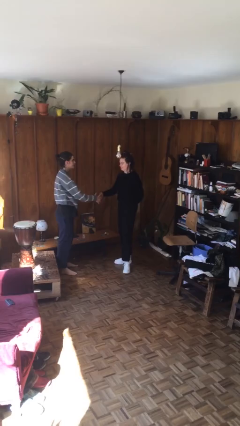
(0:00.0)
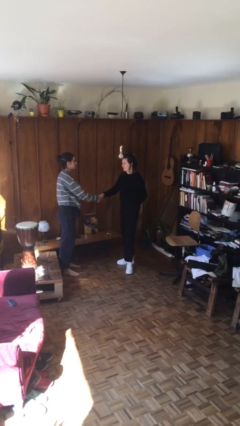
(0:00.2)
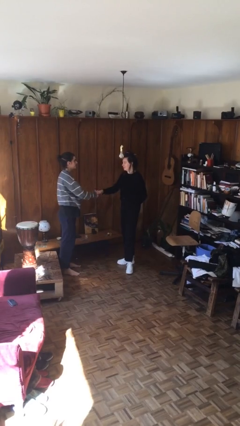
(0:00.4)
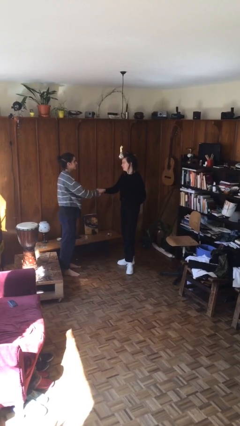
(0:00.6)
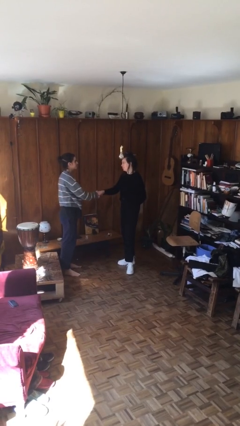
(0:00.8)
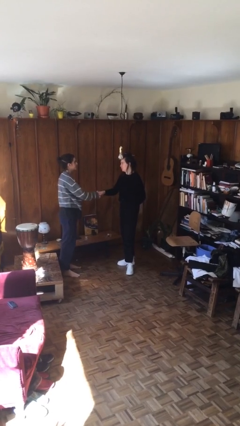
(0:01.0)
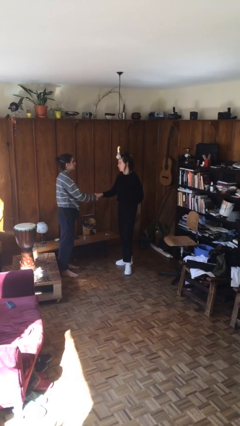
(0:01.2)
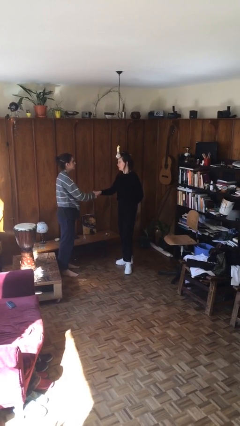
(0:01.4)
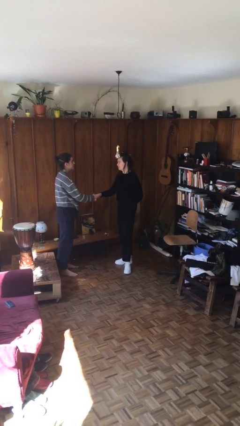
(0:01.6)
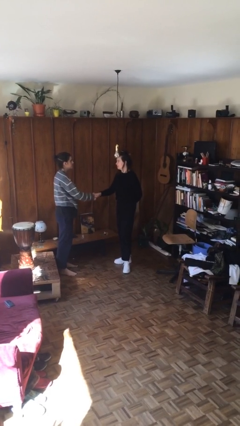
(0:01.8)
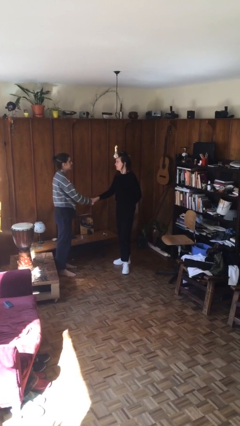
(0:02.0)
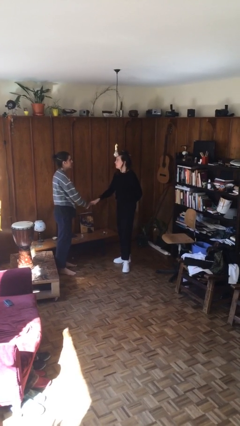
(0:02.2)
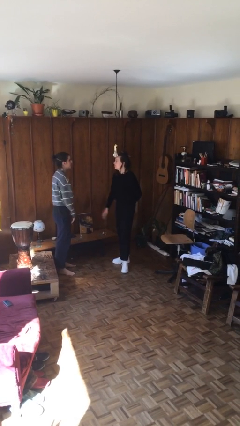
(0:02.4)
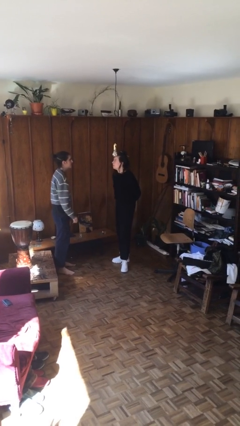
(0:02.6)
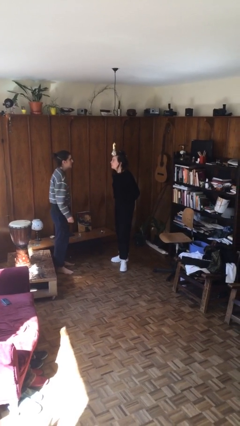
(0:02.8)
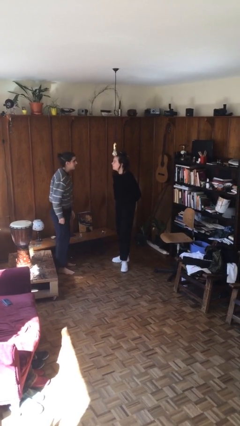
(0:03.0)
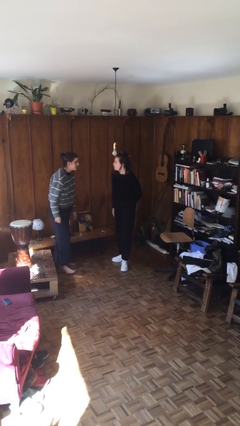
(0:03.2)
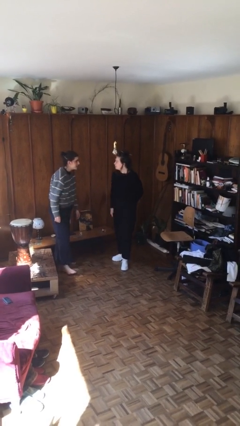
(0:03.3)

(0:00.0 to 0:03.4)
person shakes hand

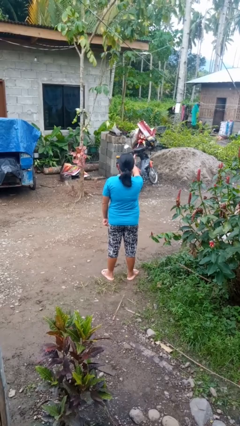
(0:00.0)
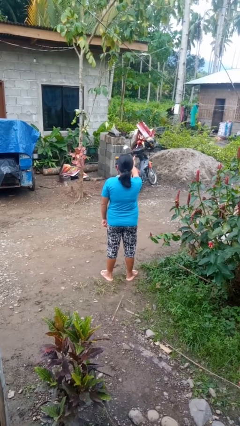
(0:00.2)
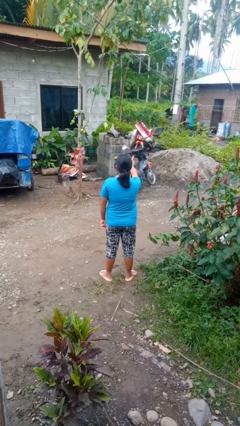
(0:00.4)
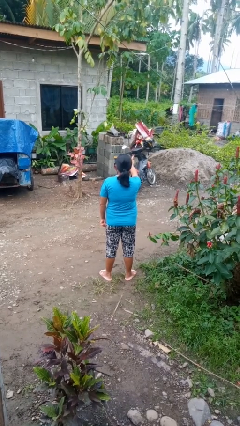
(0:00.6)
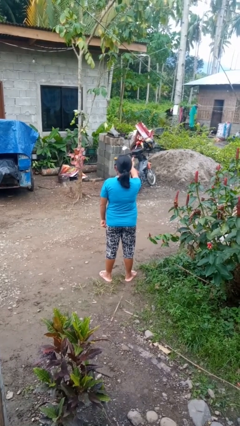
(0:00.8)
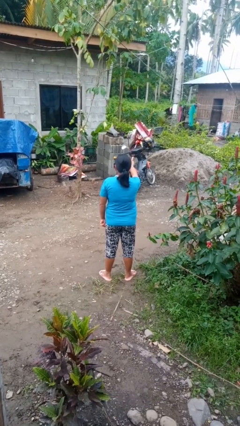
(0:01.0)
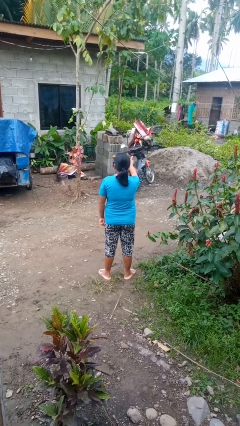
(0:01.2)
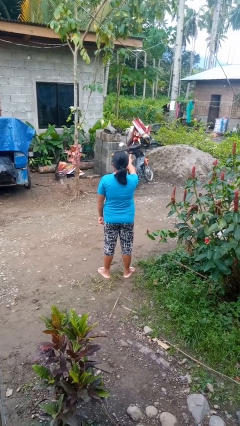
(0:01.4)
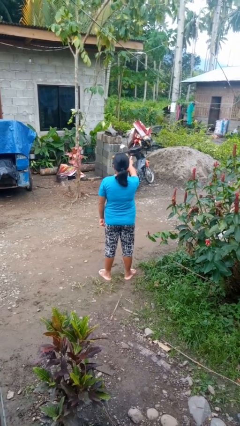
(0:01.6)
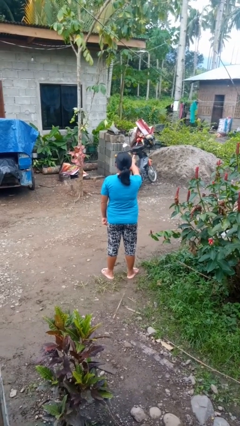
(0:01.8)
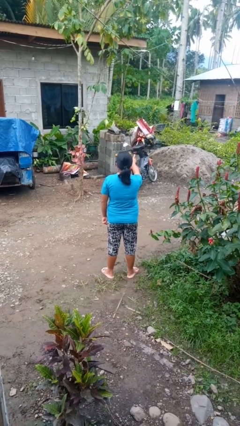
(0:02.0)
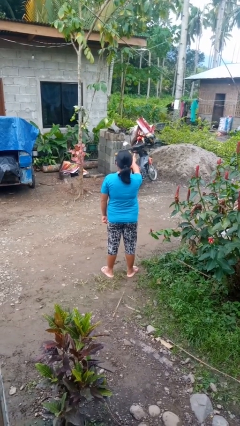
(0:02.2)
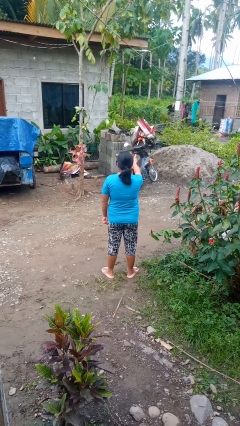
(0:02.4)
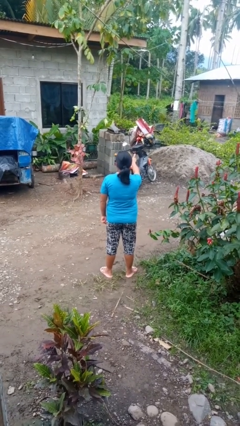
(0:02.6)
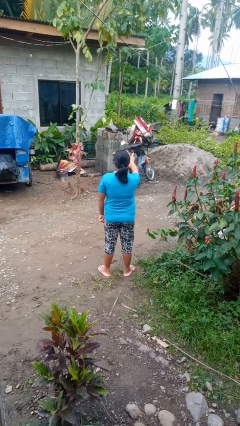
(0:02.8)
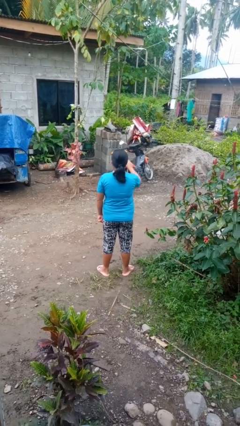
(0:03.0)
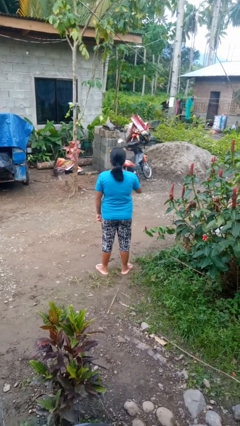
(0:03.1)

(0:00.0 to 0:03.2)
person gestures peace

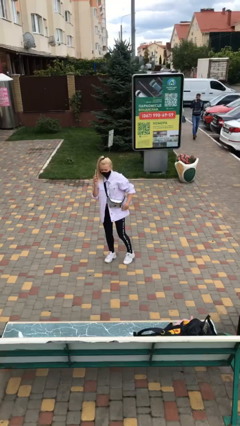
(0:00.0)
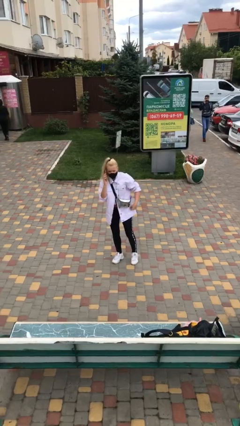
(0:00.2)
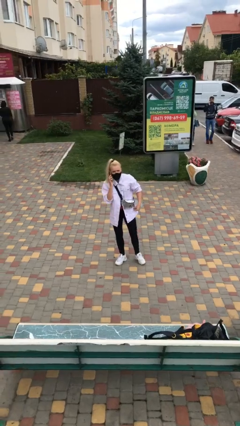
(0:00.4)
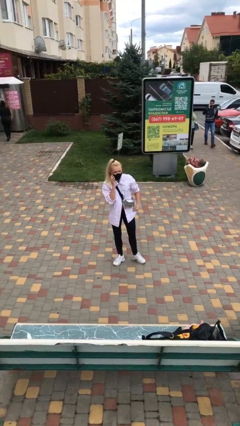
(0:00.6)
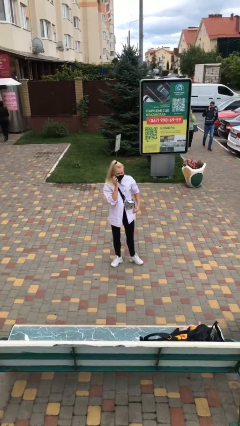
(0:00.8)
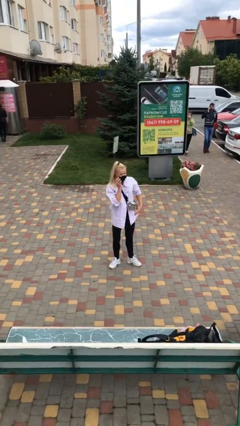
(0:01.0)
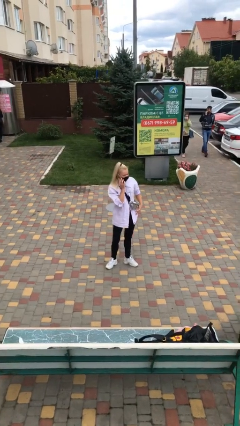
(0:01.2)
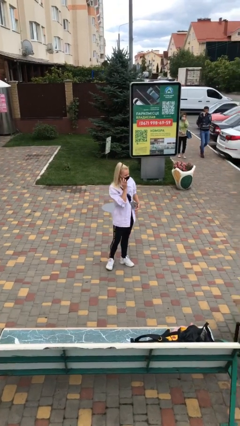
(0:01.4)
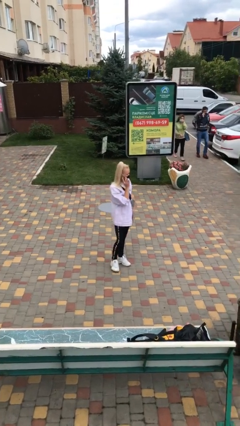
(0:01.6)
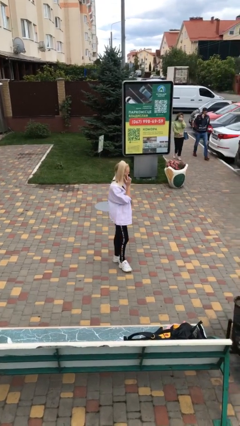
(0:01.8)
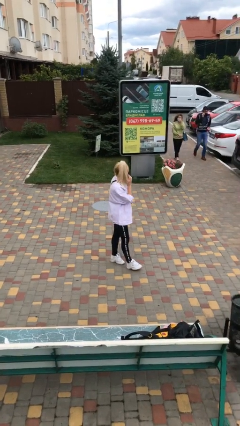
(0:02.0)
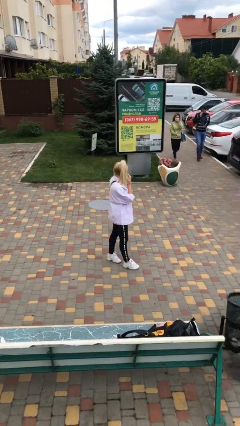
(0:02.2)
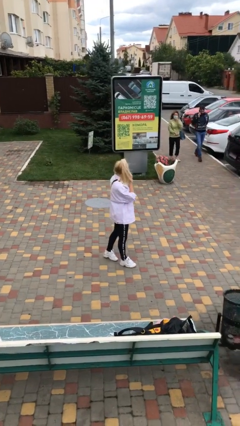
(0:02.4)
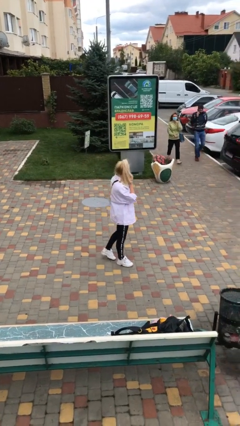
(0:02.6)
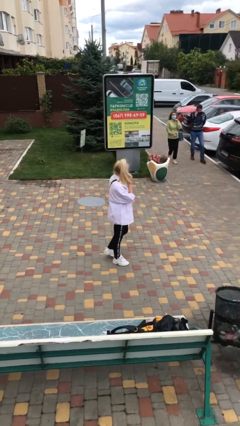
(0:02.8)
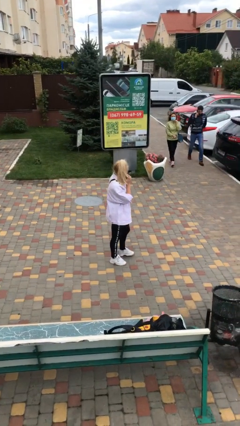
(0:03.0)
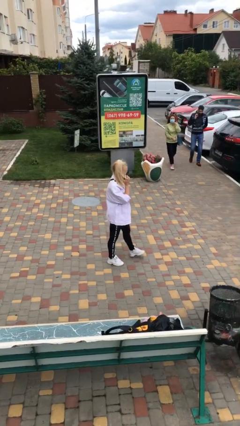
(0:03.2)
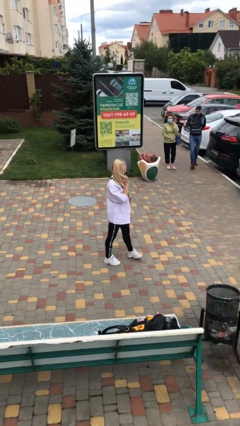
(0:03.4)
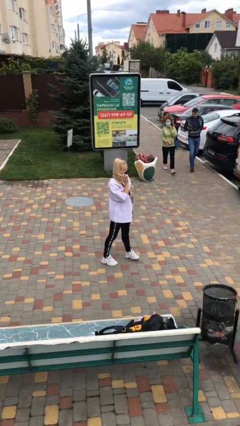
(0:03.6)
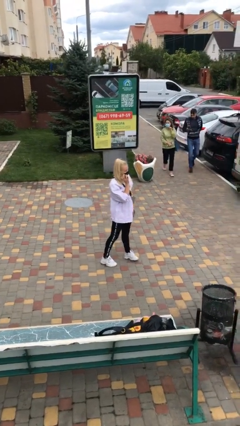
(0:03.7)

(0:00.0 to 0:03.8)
person talks on phone

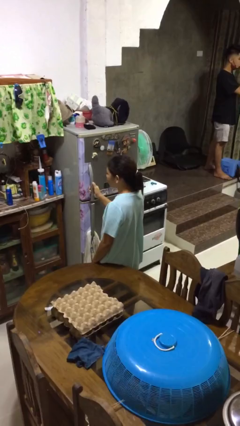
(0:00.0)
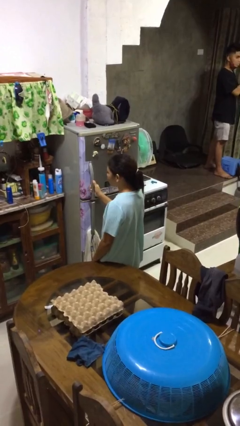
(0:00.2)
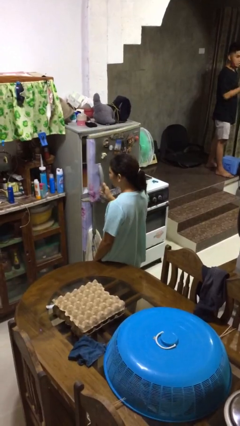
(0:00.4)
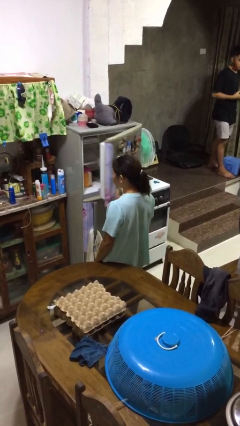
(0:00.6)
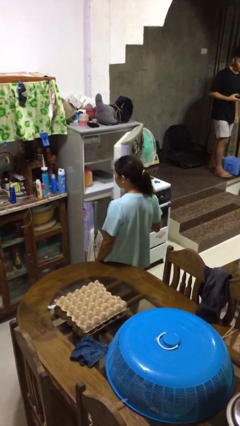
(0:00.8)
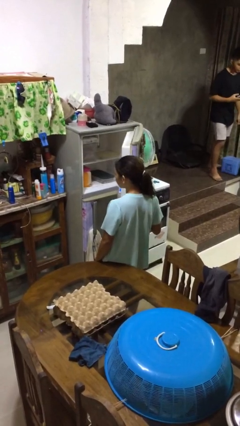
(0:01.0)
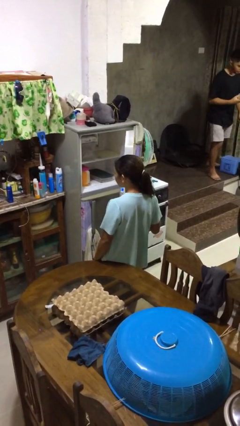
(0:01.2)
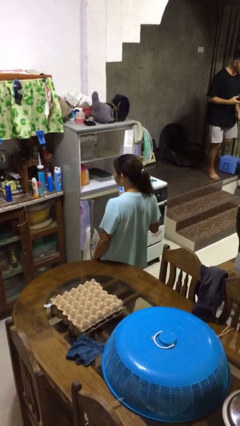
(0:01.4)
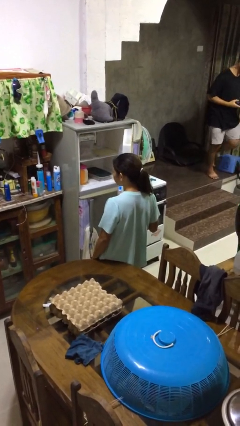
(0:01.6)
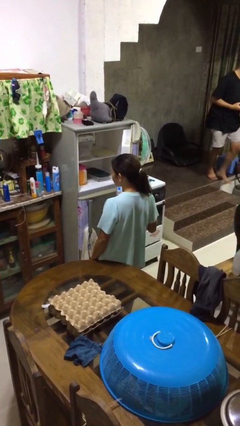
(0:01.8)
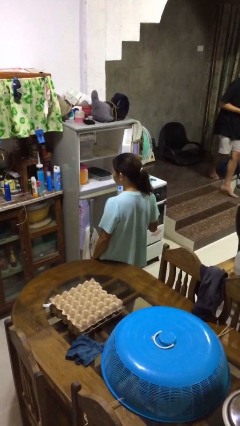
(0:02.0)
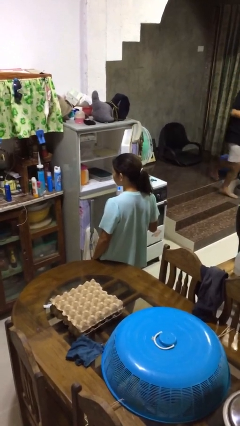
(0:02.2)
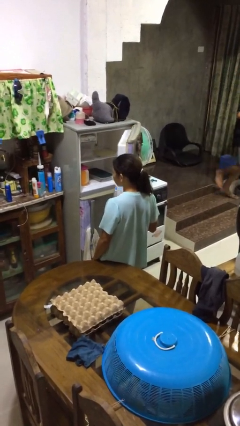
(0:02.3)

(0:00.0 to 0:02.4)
person opens refrigerator

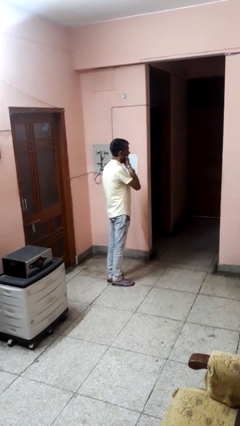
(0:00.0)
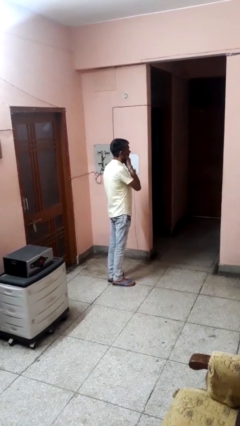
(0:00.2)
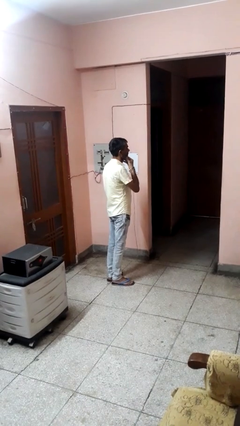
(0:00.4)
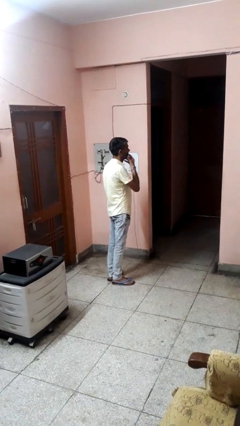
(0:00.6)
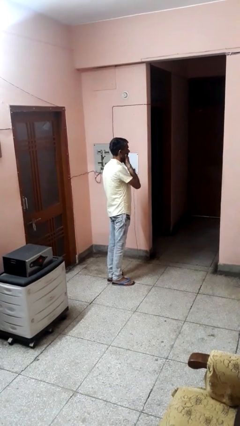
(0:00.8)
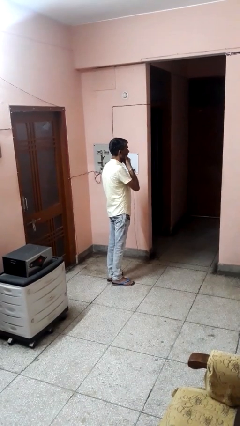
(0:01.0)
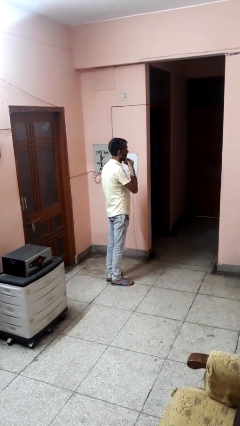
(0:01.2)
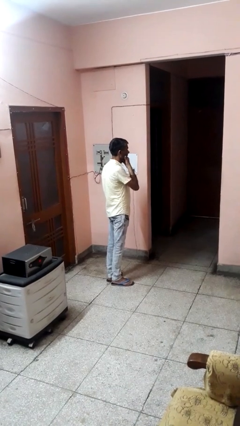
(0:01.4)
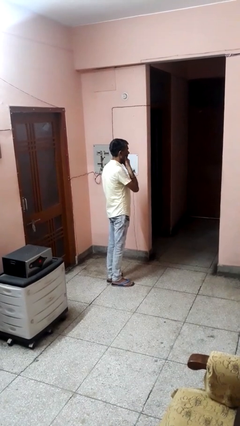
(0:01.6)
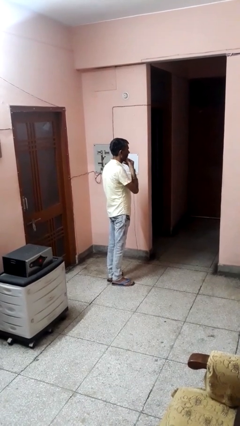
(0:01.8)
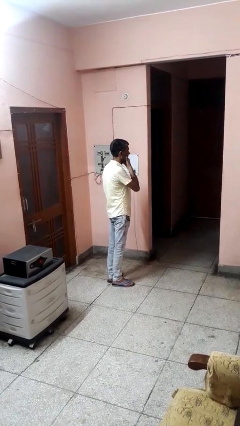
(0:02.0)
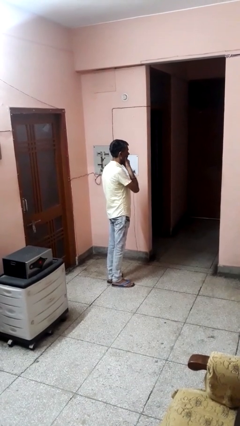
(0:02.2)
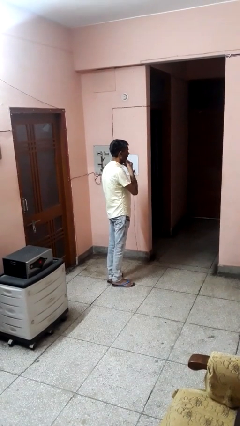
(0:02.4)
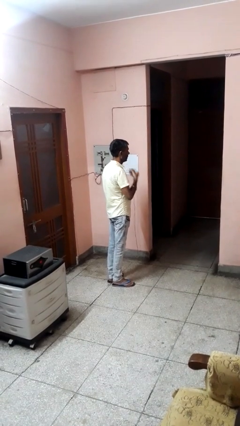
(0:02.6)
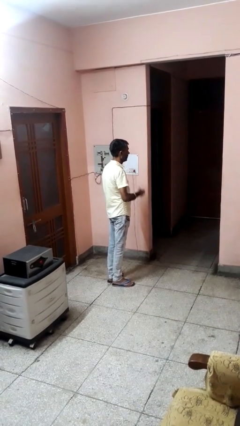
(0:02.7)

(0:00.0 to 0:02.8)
person strokes chin

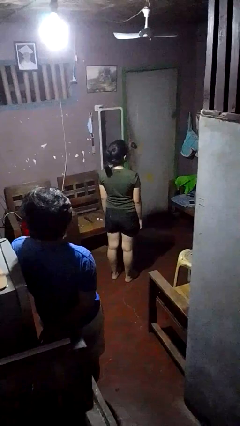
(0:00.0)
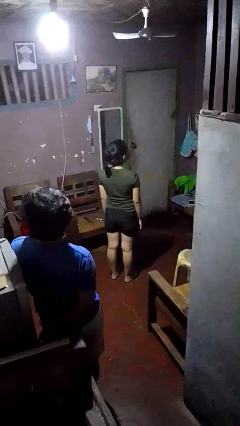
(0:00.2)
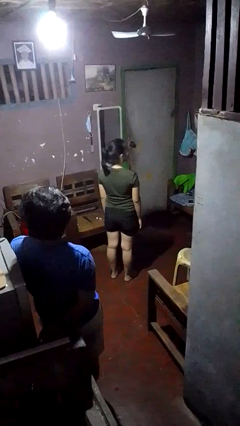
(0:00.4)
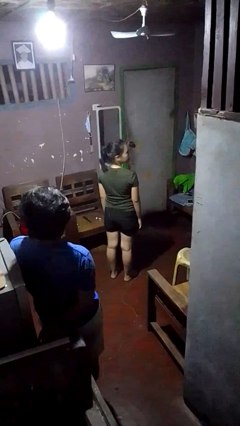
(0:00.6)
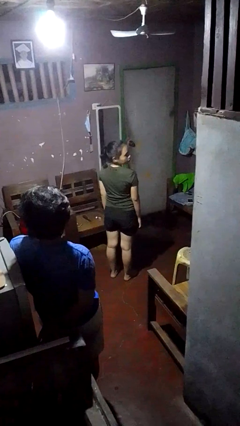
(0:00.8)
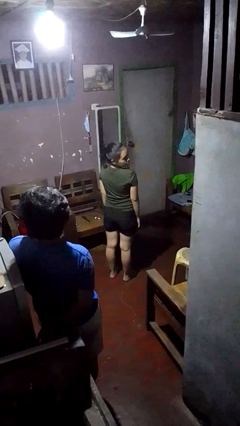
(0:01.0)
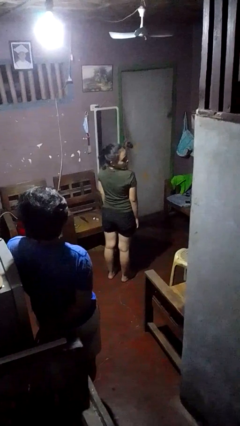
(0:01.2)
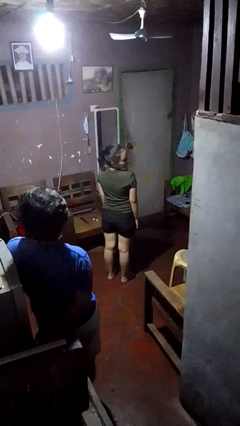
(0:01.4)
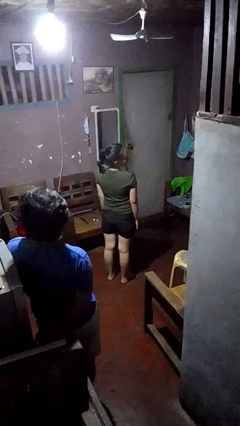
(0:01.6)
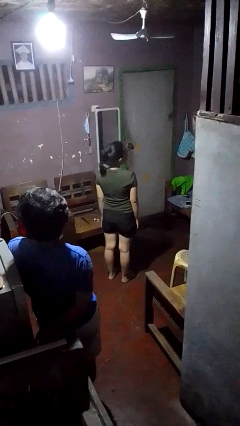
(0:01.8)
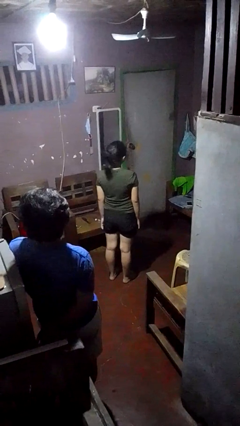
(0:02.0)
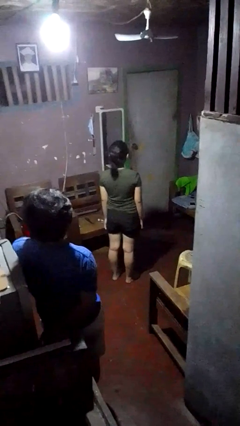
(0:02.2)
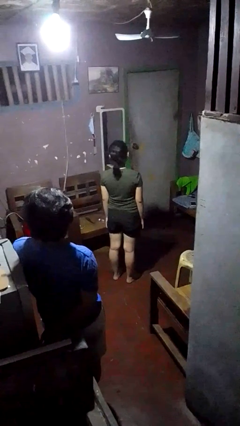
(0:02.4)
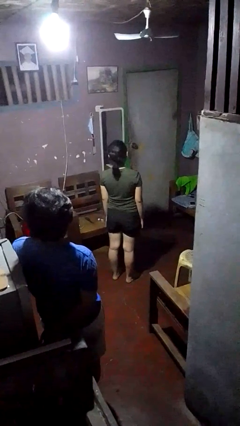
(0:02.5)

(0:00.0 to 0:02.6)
person looks over shoulder
